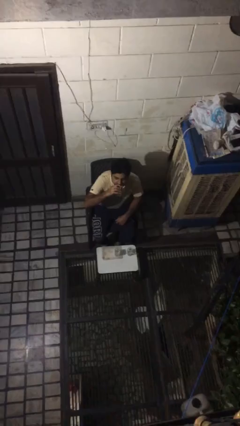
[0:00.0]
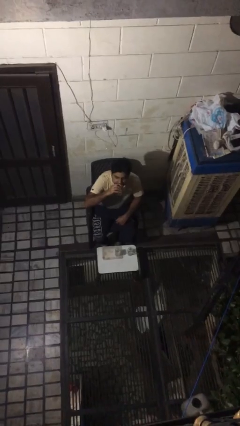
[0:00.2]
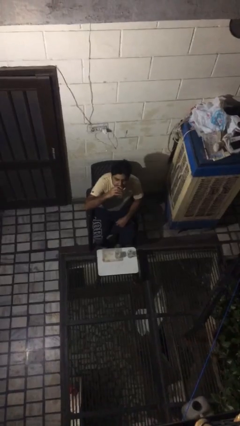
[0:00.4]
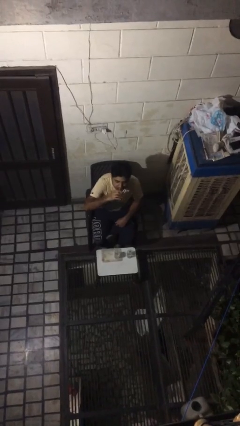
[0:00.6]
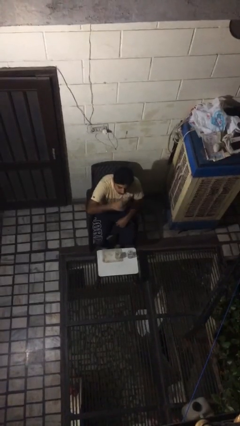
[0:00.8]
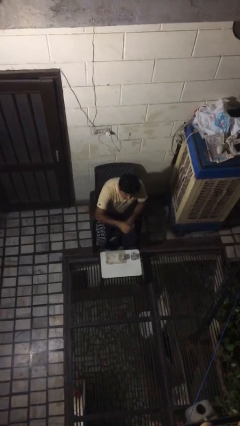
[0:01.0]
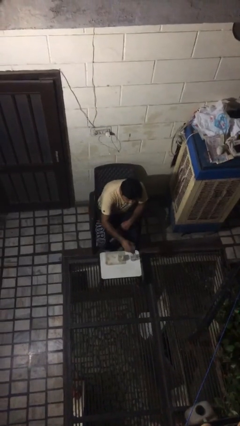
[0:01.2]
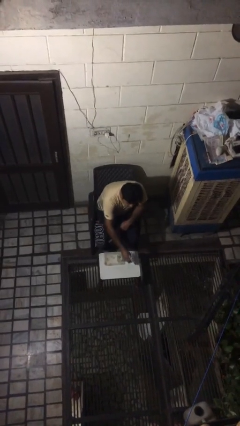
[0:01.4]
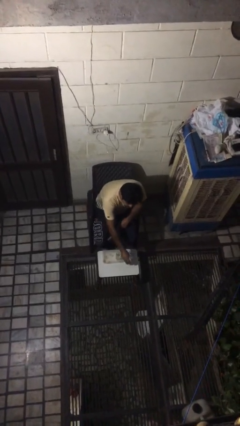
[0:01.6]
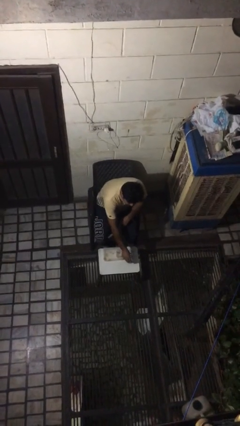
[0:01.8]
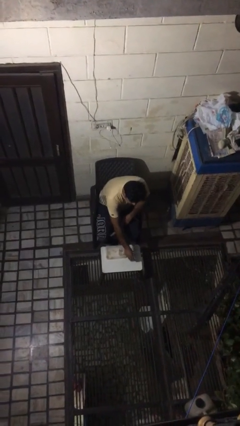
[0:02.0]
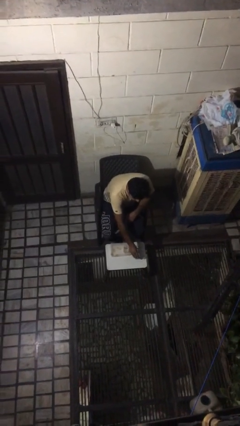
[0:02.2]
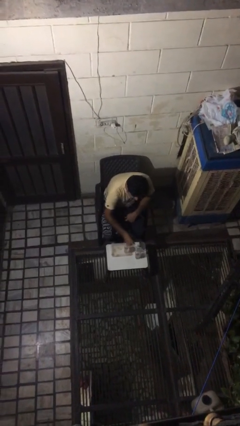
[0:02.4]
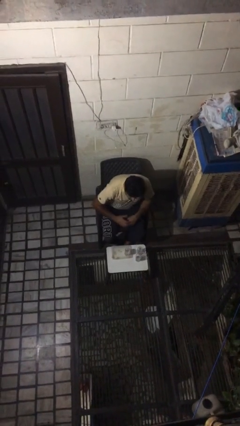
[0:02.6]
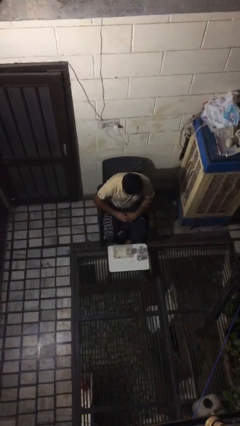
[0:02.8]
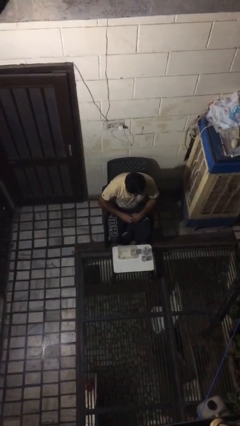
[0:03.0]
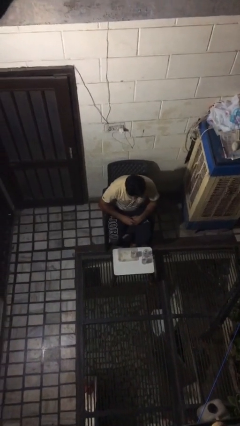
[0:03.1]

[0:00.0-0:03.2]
person puts down object on table

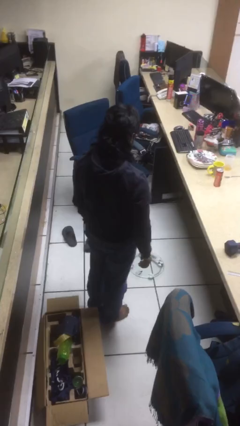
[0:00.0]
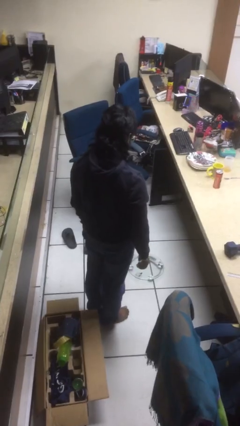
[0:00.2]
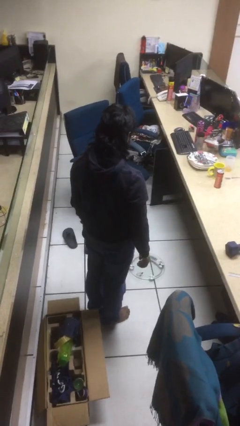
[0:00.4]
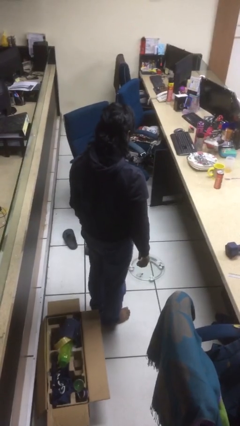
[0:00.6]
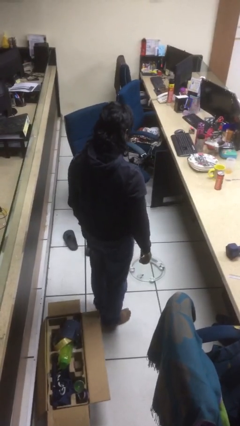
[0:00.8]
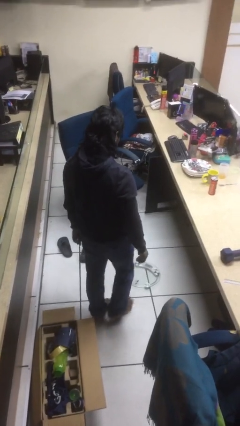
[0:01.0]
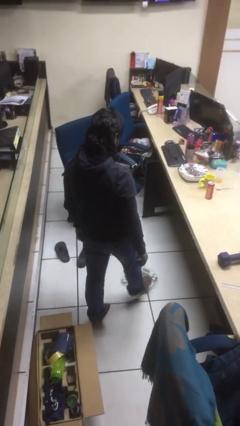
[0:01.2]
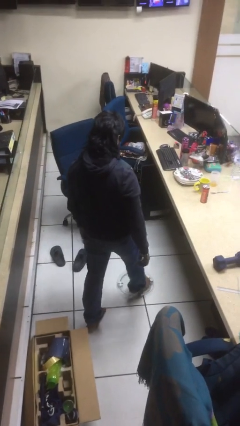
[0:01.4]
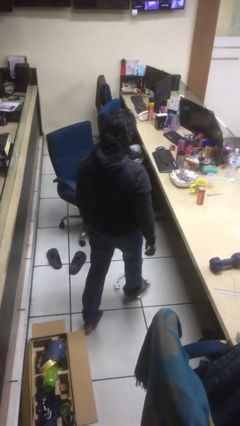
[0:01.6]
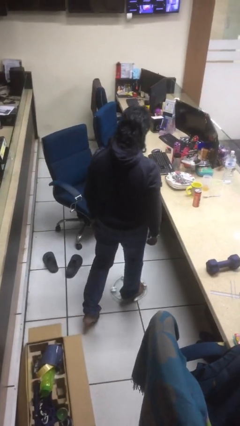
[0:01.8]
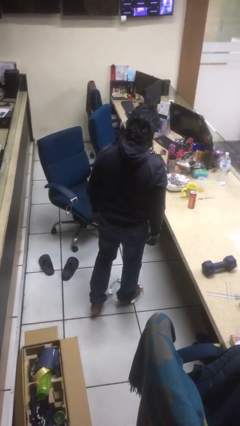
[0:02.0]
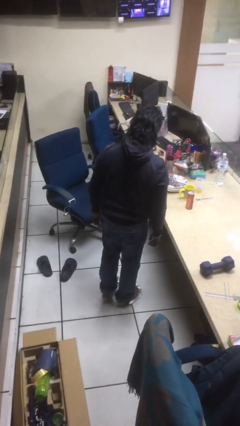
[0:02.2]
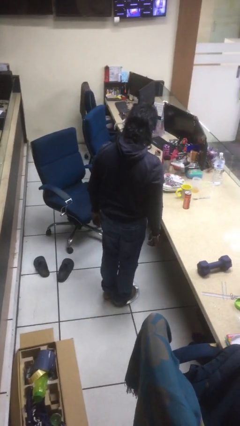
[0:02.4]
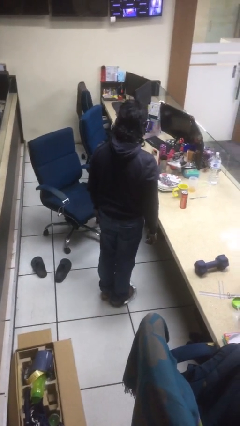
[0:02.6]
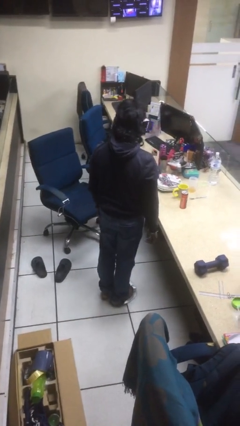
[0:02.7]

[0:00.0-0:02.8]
person uses bodyweight scale

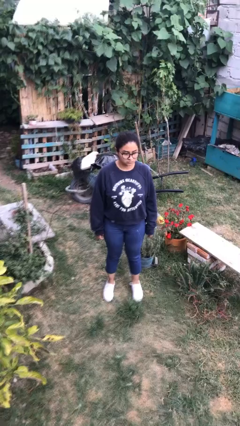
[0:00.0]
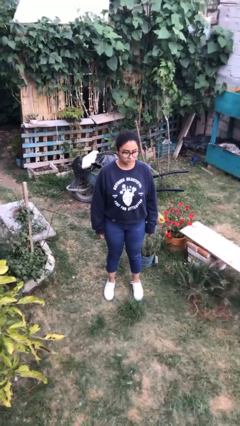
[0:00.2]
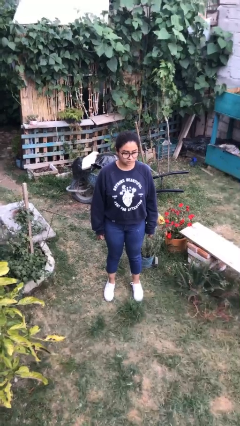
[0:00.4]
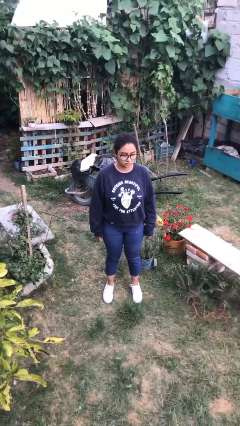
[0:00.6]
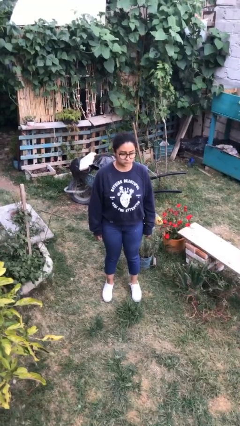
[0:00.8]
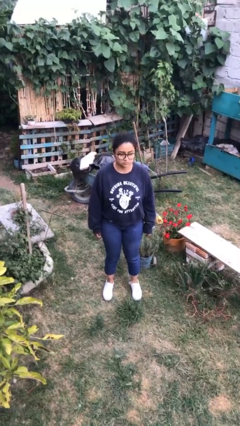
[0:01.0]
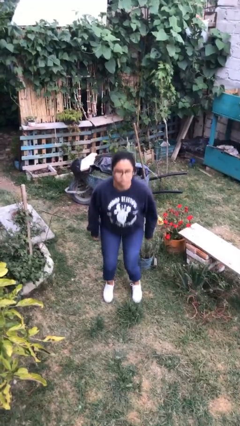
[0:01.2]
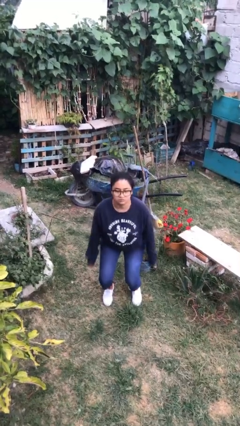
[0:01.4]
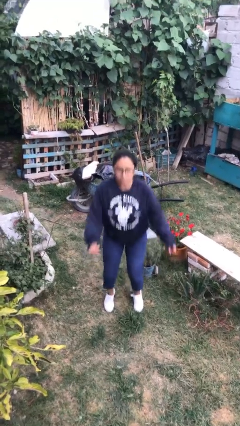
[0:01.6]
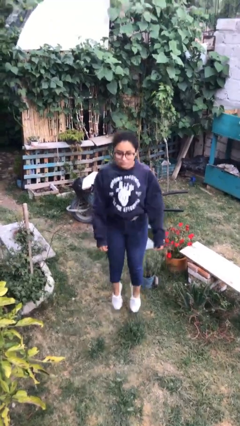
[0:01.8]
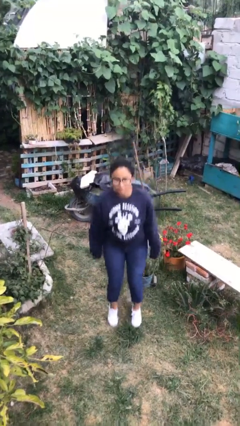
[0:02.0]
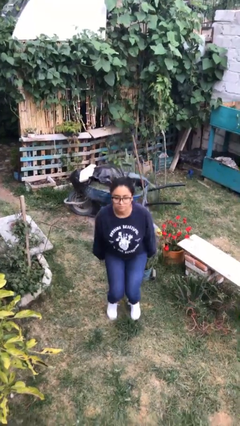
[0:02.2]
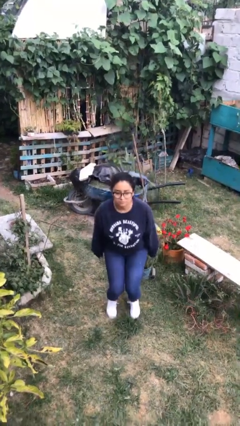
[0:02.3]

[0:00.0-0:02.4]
person jumps

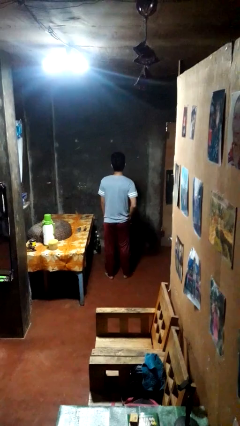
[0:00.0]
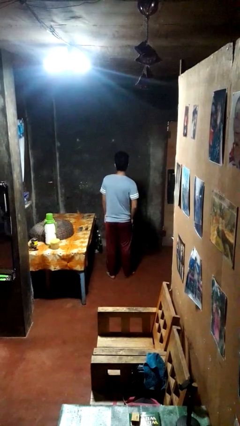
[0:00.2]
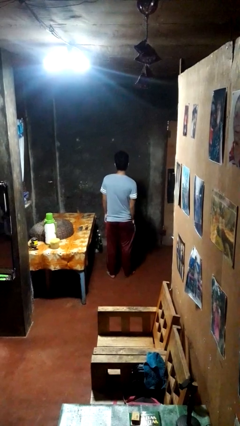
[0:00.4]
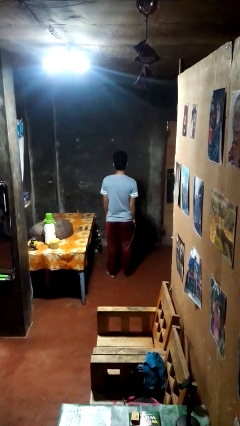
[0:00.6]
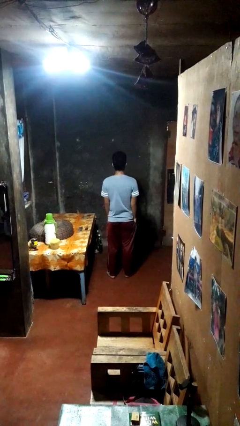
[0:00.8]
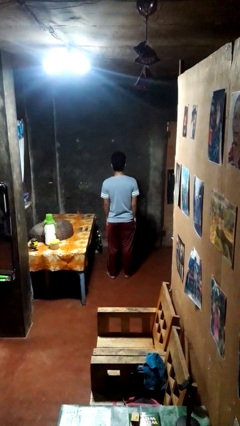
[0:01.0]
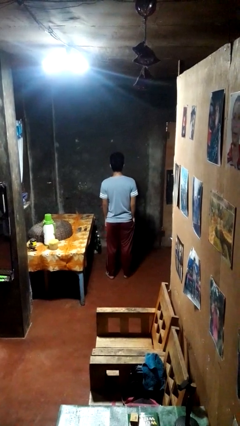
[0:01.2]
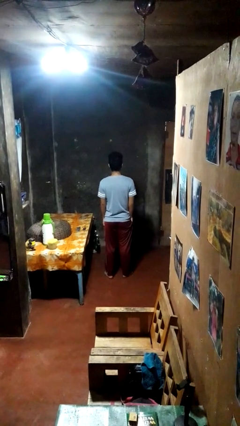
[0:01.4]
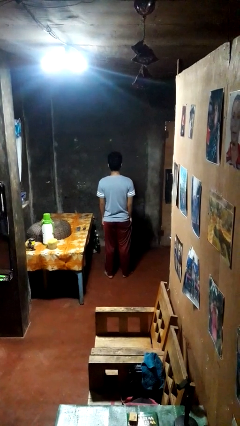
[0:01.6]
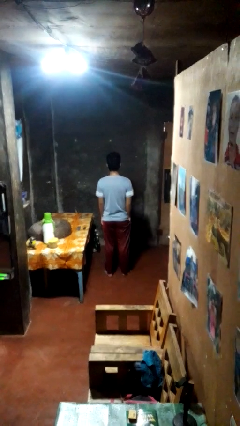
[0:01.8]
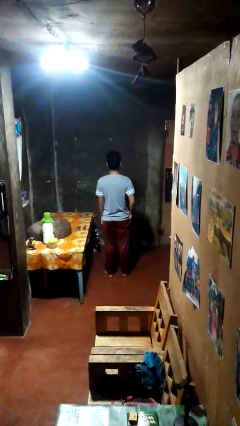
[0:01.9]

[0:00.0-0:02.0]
person puts hands in back pockets

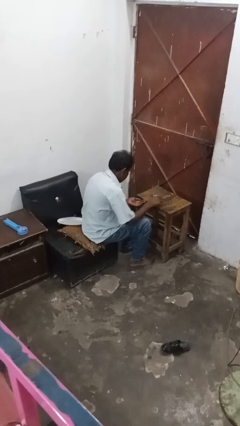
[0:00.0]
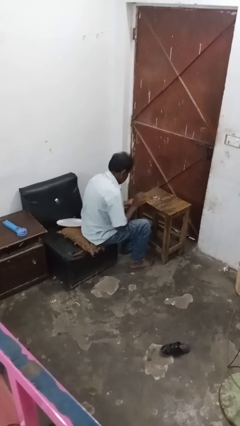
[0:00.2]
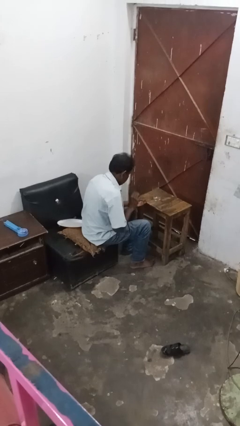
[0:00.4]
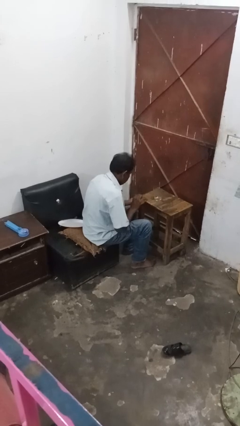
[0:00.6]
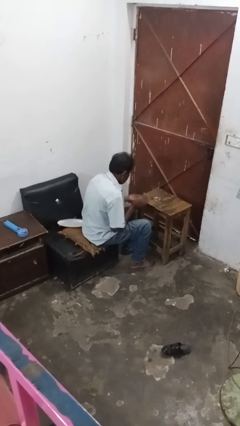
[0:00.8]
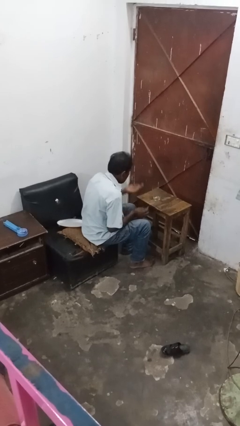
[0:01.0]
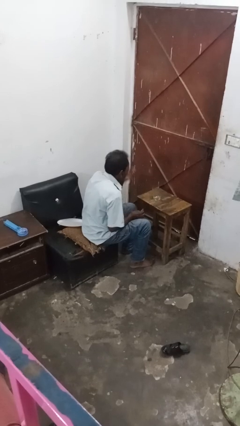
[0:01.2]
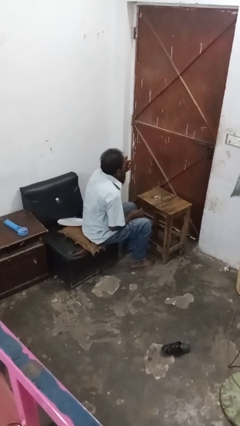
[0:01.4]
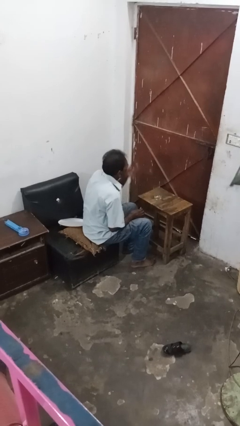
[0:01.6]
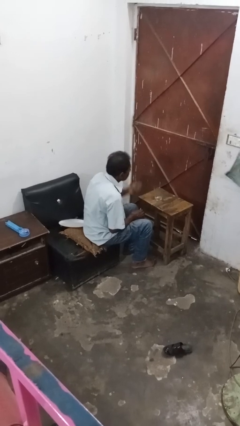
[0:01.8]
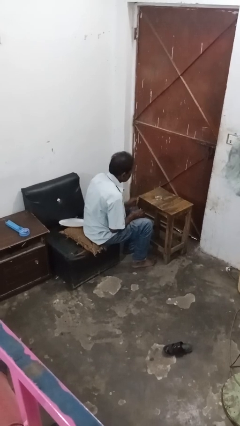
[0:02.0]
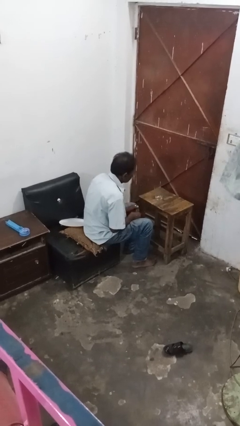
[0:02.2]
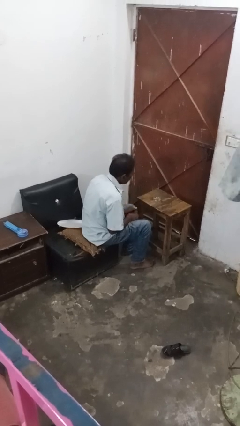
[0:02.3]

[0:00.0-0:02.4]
person takes medicine pills

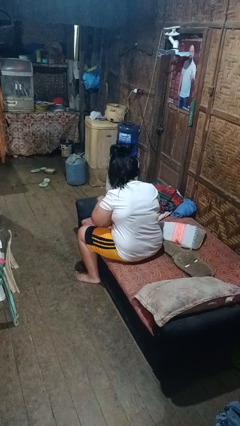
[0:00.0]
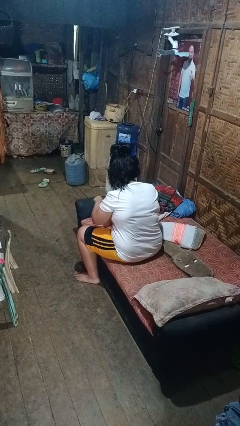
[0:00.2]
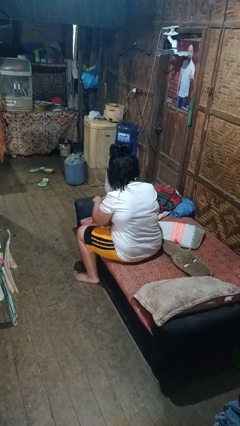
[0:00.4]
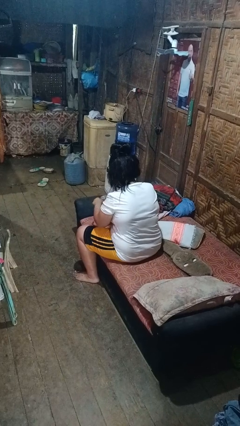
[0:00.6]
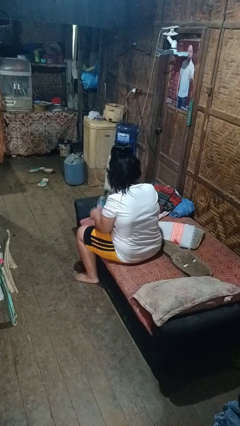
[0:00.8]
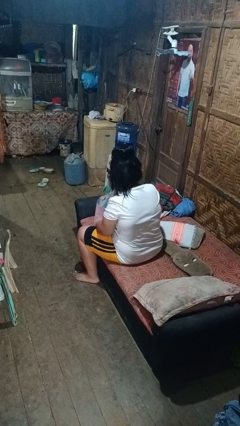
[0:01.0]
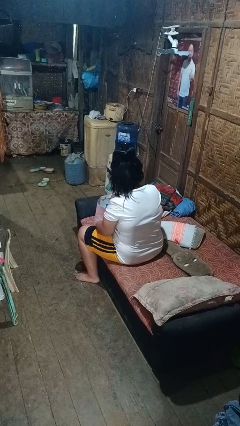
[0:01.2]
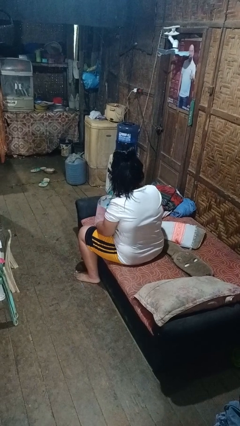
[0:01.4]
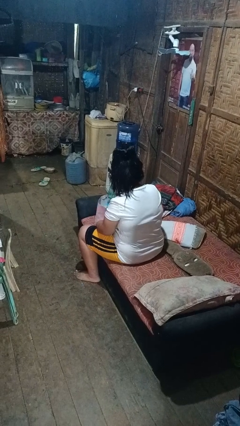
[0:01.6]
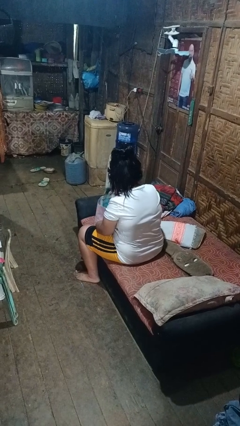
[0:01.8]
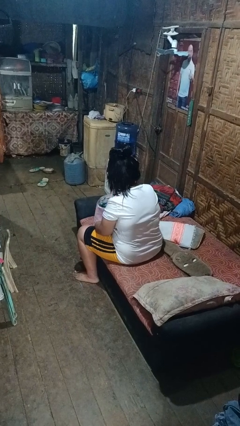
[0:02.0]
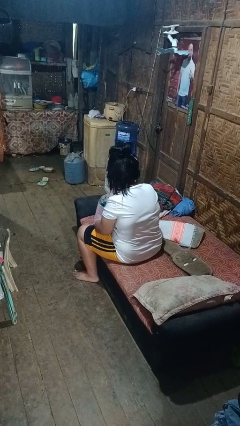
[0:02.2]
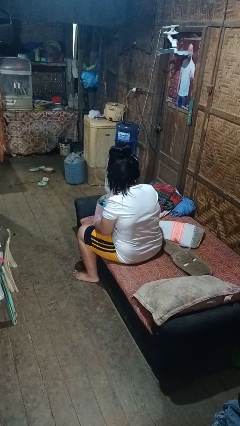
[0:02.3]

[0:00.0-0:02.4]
person searches in bag

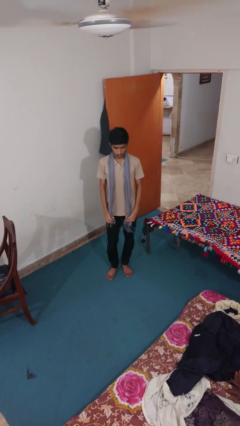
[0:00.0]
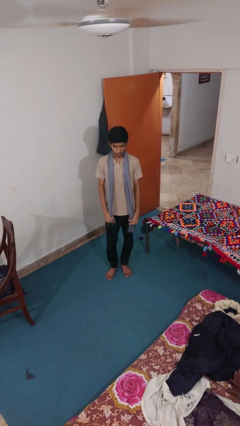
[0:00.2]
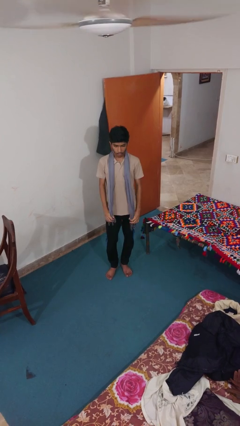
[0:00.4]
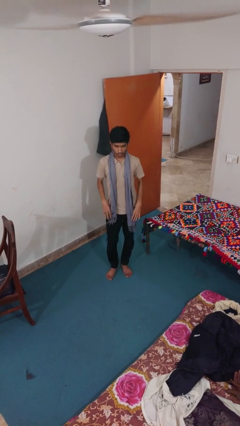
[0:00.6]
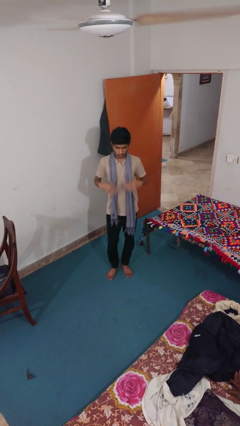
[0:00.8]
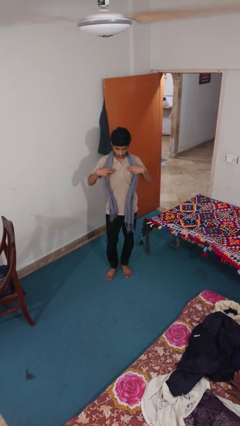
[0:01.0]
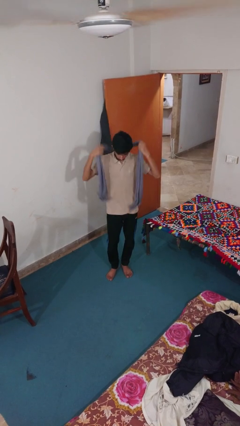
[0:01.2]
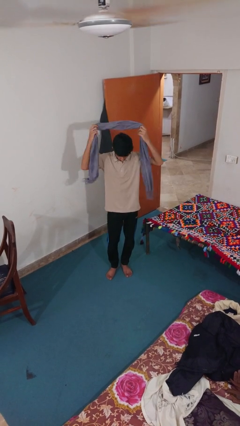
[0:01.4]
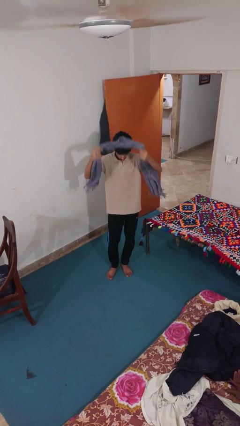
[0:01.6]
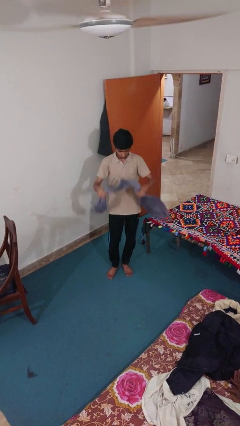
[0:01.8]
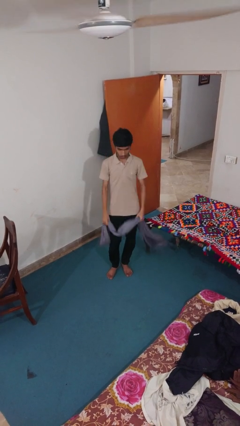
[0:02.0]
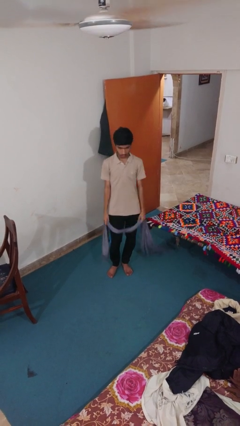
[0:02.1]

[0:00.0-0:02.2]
person takes off scarf
